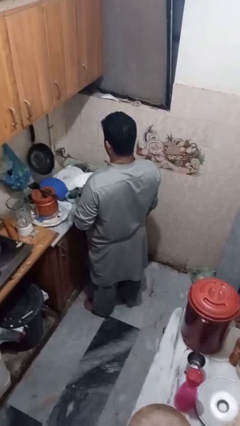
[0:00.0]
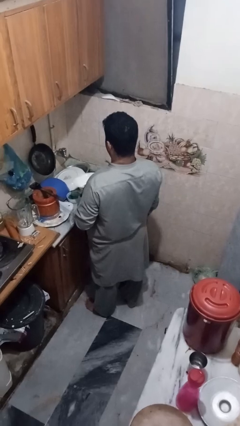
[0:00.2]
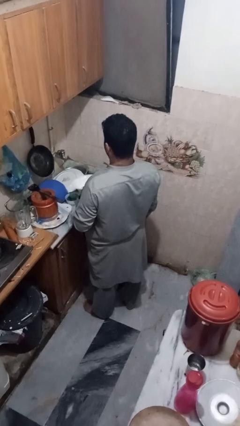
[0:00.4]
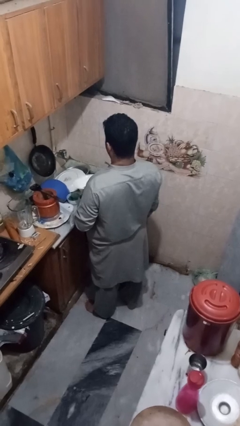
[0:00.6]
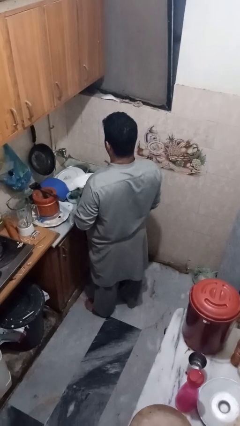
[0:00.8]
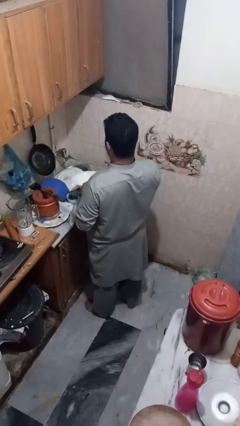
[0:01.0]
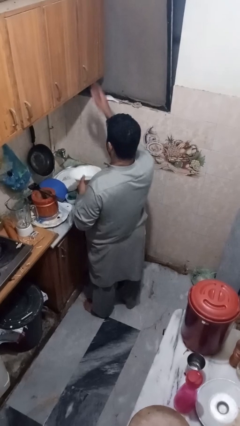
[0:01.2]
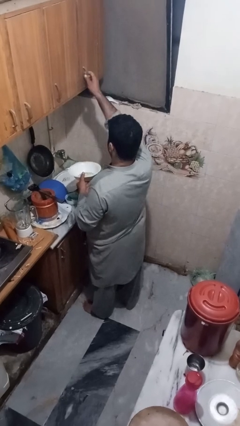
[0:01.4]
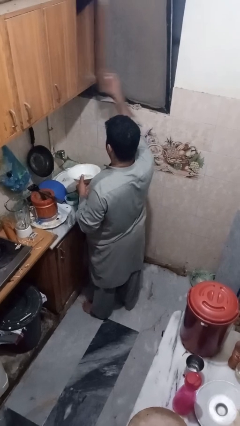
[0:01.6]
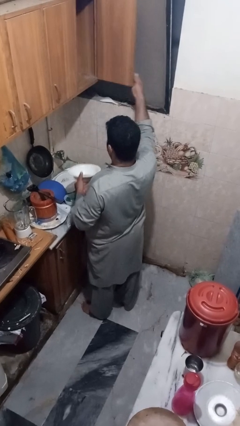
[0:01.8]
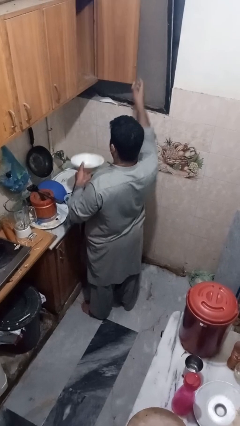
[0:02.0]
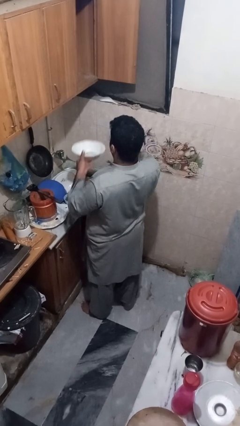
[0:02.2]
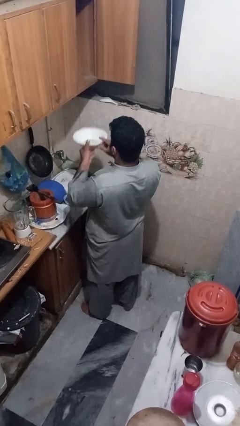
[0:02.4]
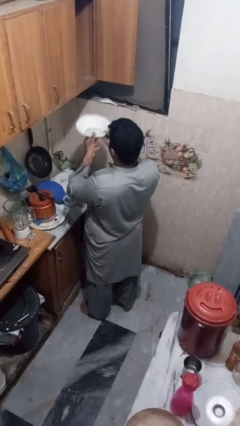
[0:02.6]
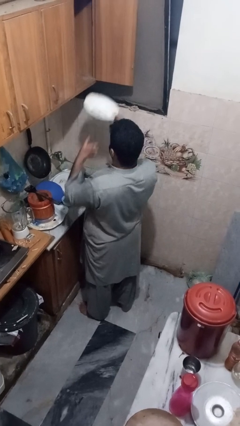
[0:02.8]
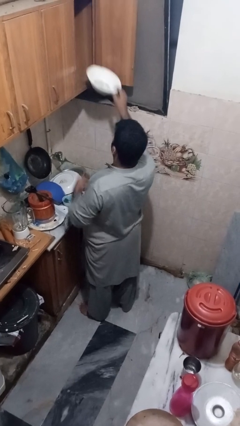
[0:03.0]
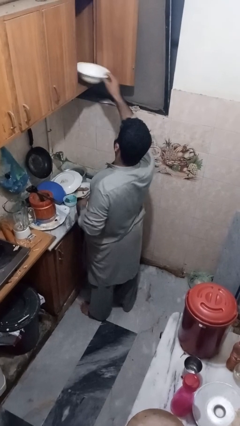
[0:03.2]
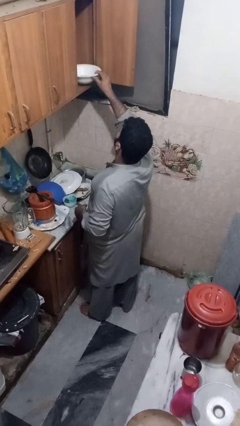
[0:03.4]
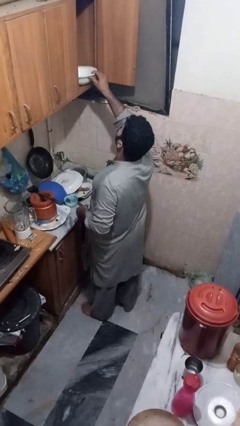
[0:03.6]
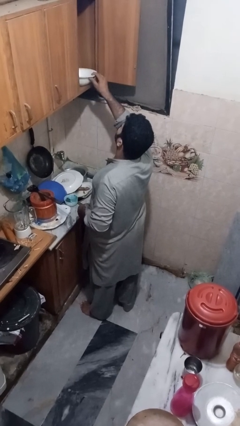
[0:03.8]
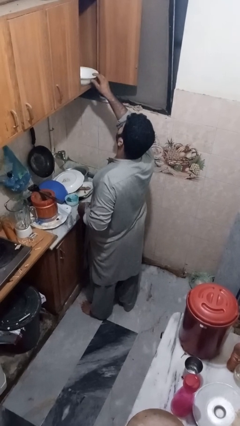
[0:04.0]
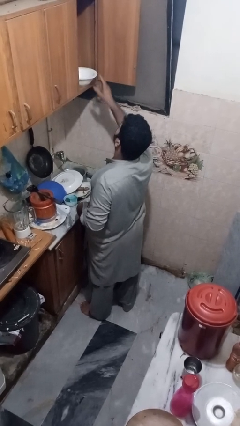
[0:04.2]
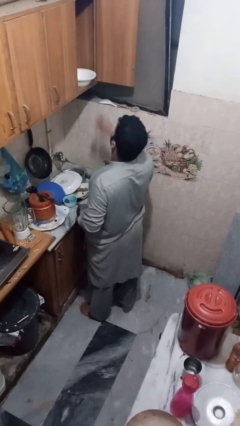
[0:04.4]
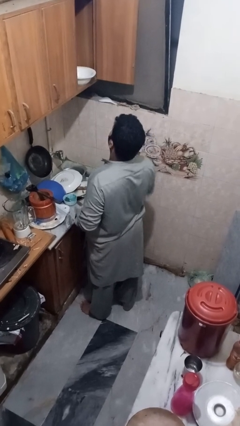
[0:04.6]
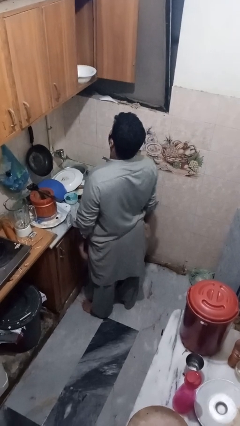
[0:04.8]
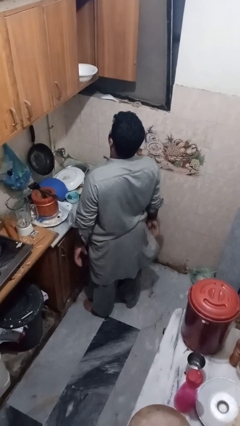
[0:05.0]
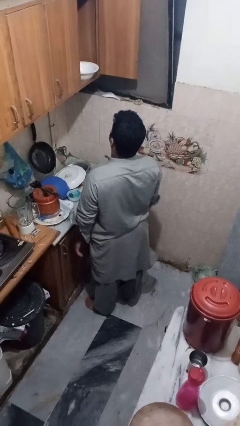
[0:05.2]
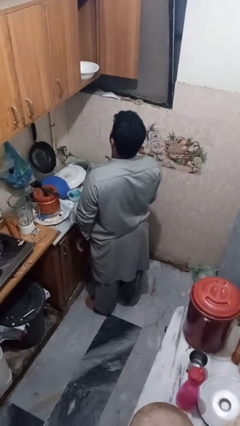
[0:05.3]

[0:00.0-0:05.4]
person puts object in cabinet

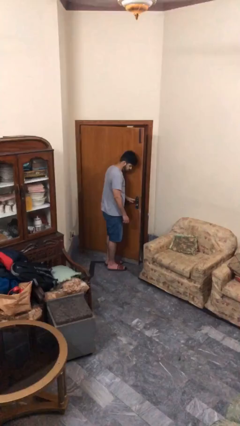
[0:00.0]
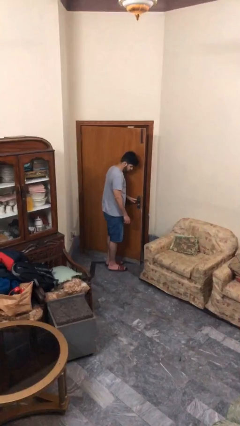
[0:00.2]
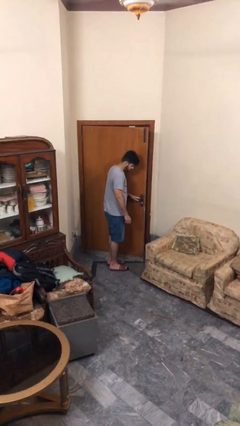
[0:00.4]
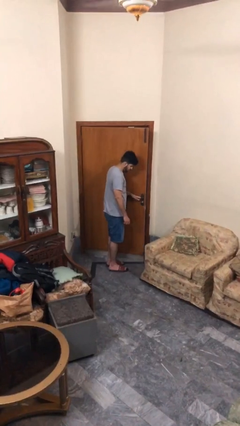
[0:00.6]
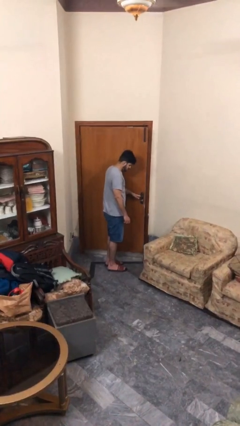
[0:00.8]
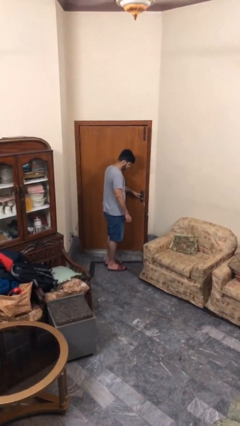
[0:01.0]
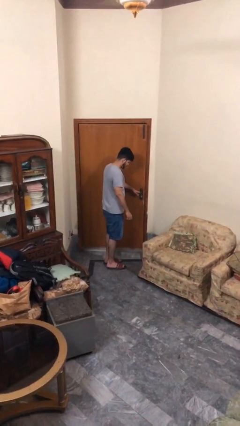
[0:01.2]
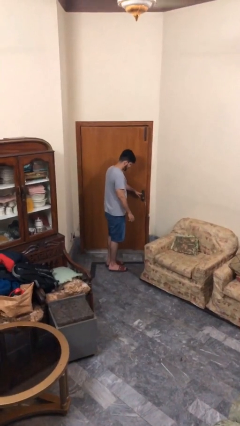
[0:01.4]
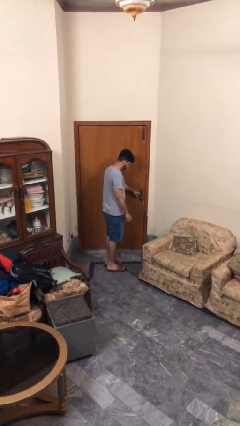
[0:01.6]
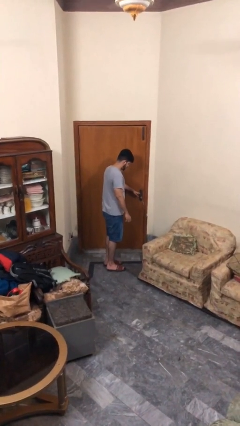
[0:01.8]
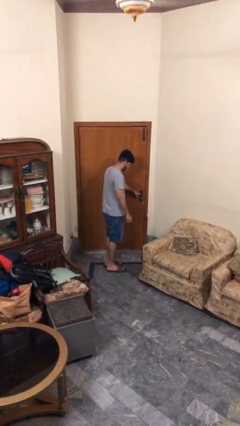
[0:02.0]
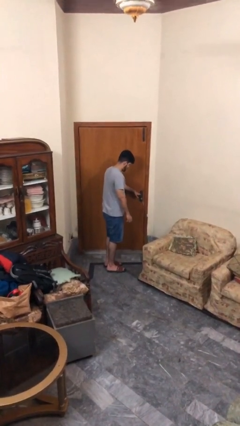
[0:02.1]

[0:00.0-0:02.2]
person closes facility door

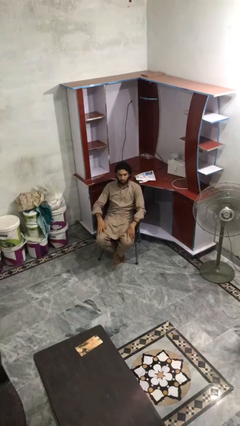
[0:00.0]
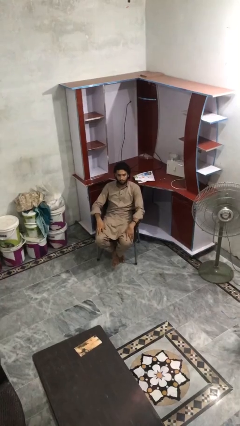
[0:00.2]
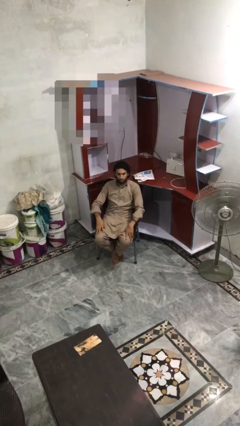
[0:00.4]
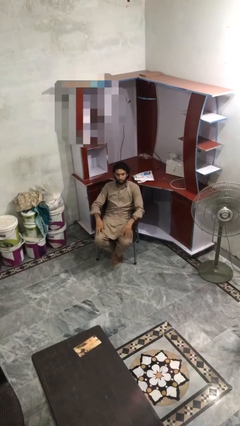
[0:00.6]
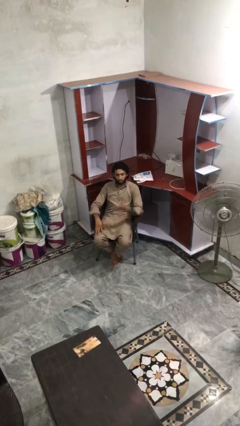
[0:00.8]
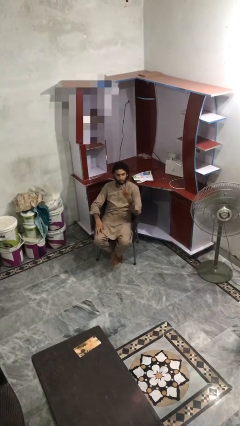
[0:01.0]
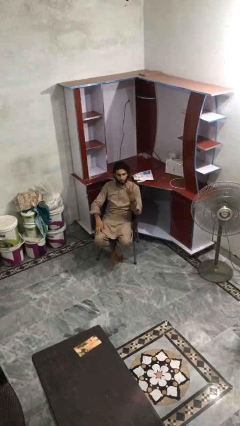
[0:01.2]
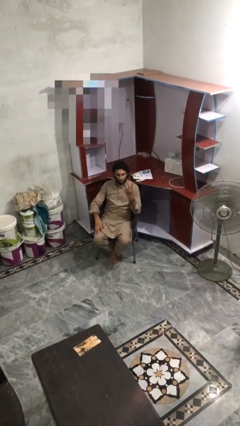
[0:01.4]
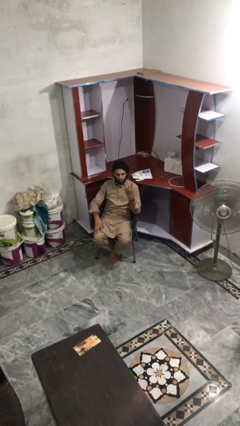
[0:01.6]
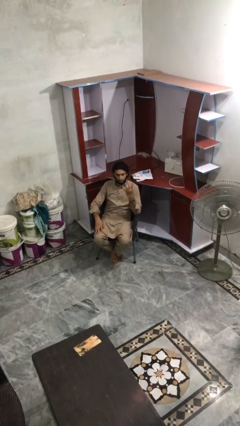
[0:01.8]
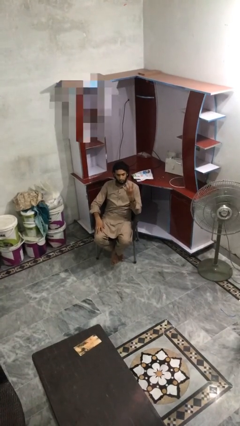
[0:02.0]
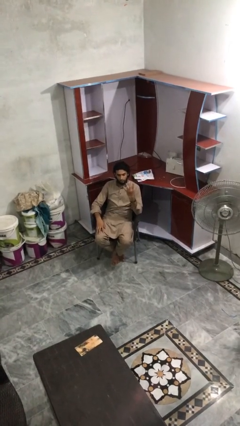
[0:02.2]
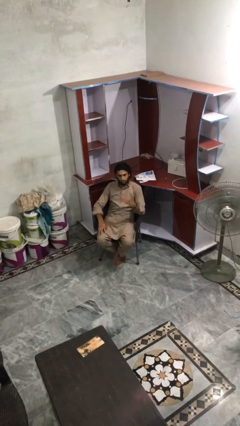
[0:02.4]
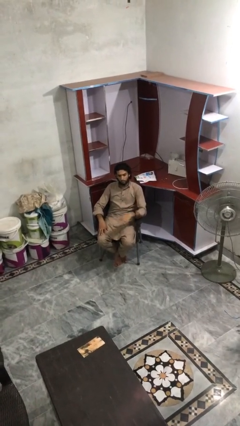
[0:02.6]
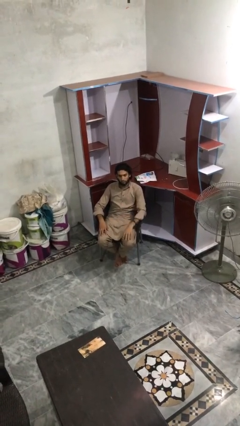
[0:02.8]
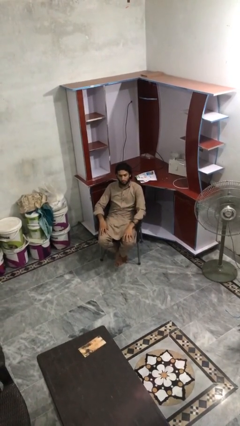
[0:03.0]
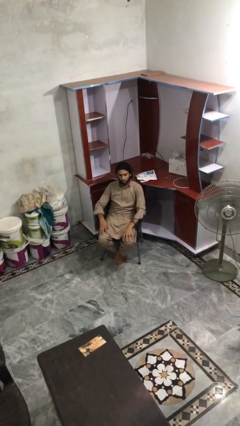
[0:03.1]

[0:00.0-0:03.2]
person gestures number four

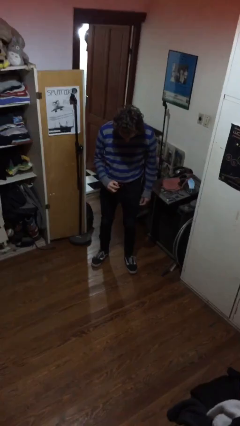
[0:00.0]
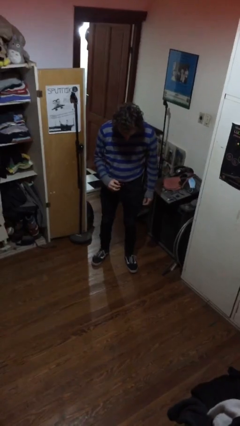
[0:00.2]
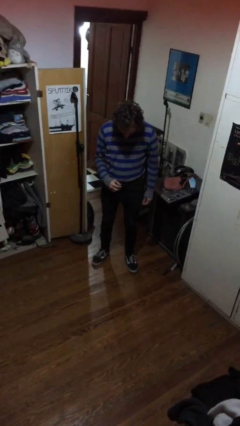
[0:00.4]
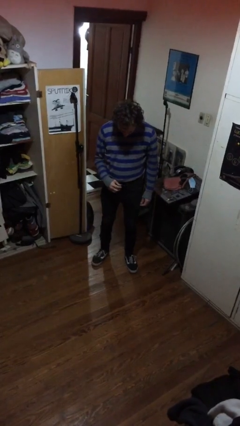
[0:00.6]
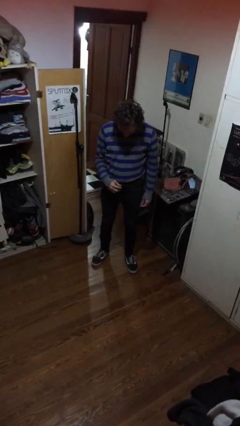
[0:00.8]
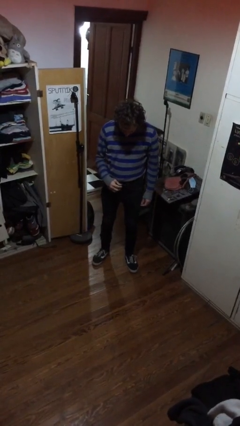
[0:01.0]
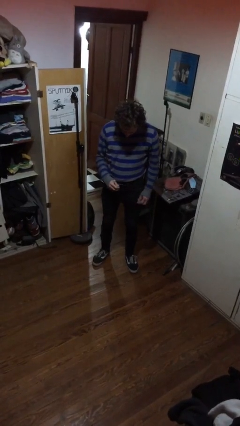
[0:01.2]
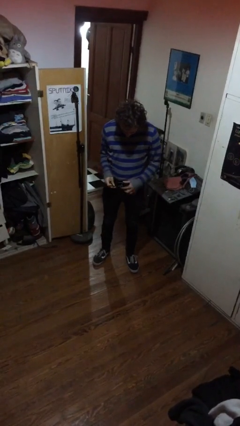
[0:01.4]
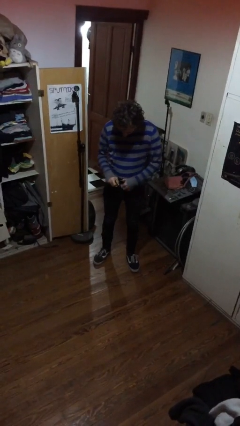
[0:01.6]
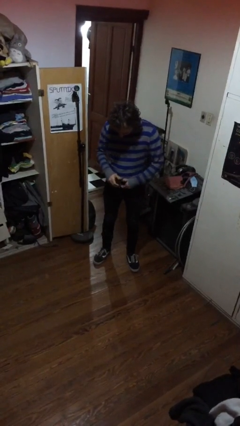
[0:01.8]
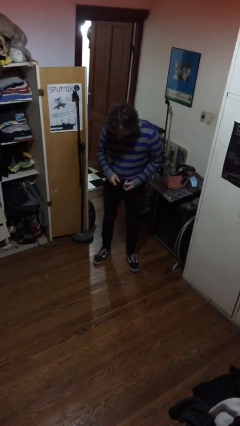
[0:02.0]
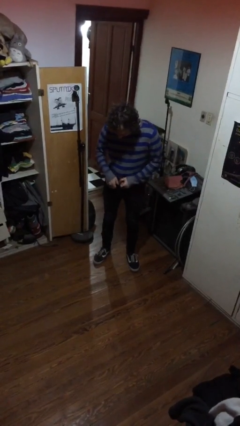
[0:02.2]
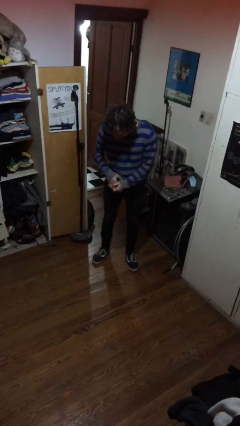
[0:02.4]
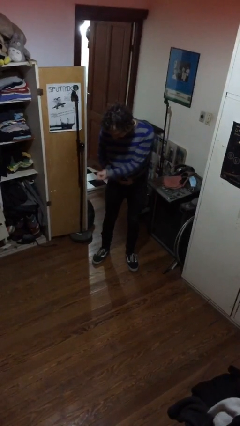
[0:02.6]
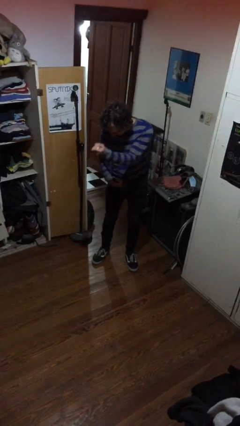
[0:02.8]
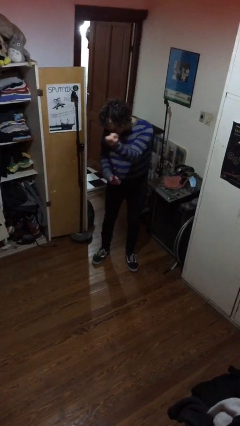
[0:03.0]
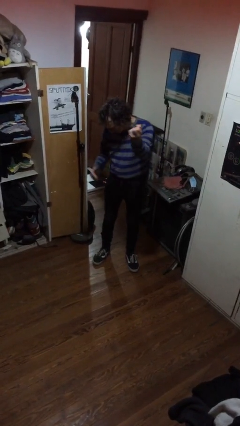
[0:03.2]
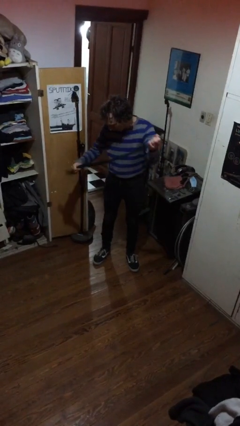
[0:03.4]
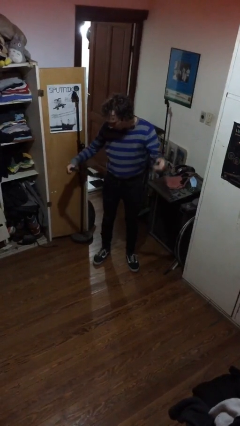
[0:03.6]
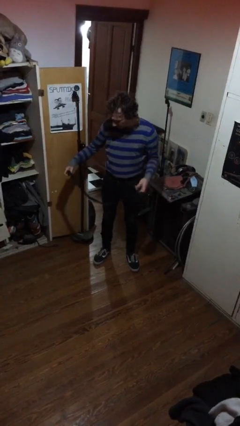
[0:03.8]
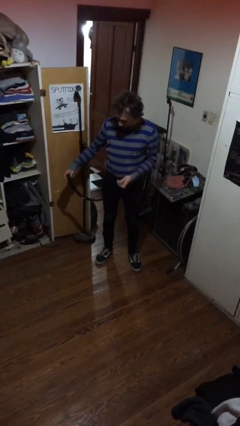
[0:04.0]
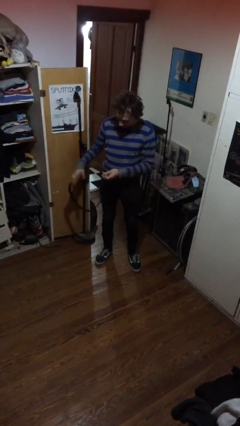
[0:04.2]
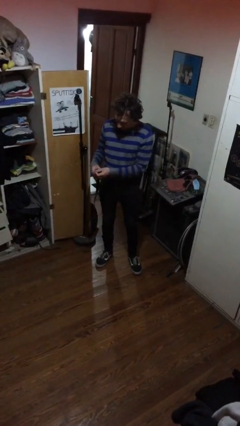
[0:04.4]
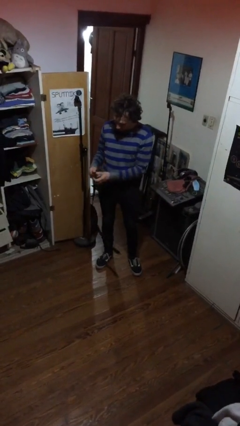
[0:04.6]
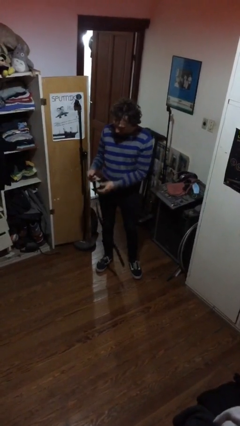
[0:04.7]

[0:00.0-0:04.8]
person takes off belt

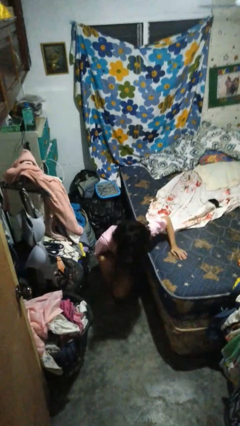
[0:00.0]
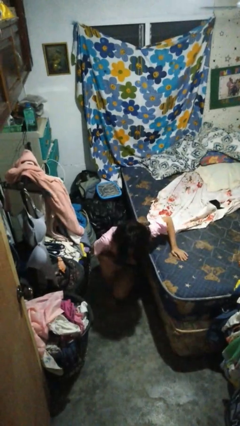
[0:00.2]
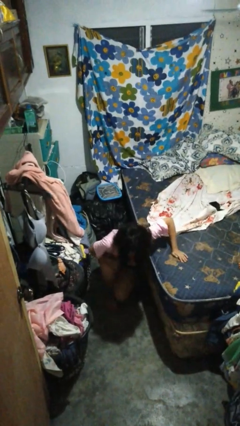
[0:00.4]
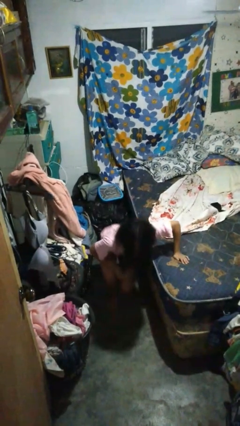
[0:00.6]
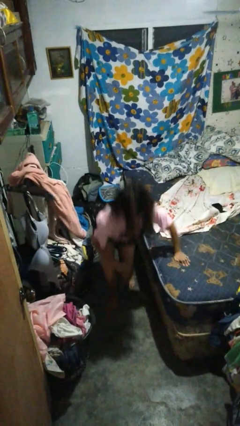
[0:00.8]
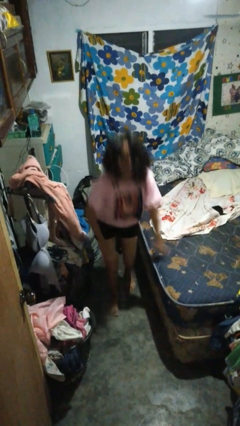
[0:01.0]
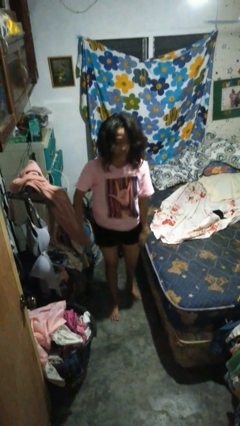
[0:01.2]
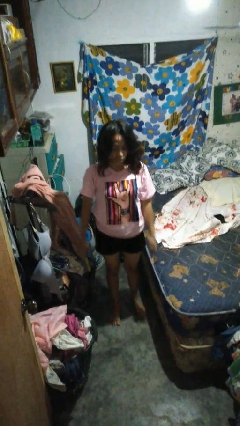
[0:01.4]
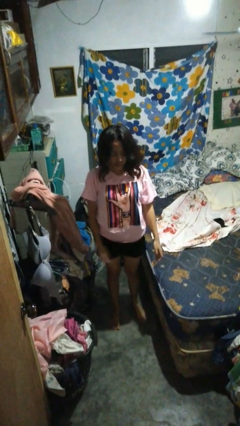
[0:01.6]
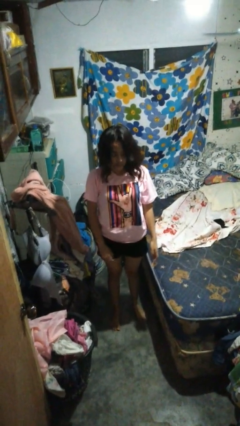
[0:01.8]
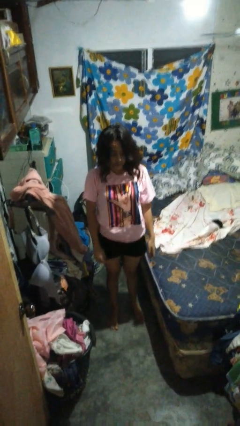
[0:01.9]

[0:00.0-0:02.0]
person stands up from floor
